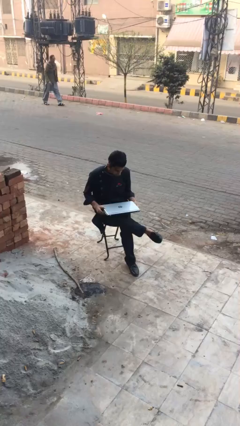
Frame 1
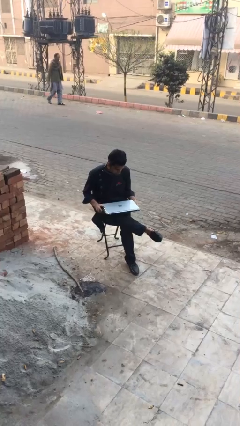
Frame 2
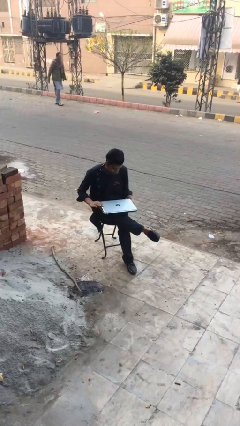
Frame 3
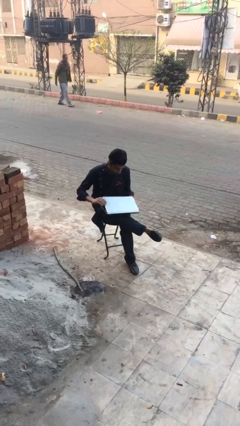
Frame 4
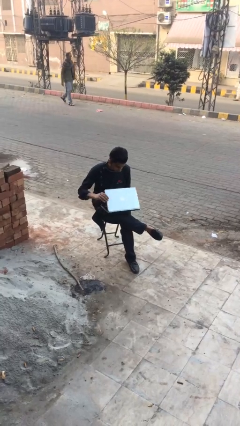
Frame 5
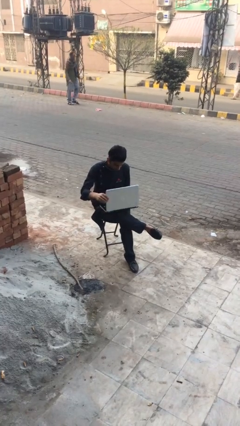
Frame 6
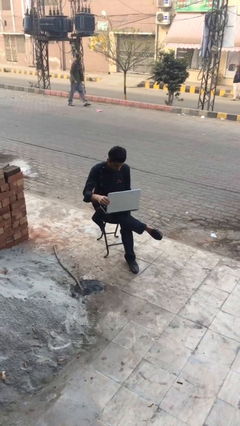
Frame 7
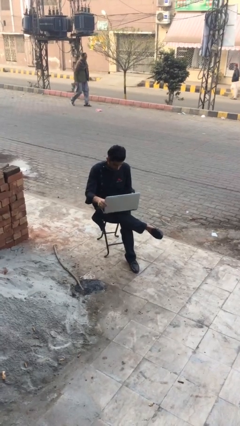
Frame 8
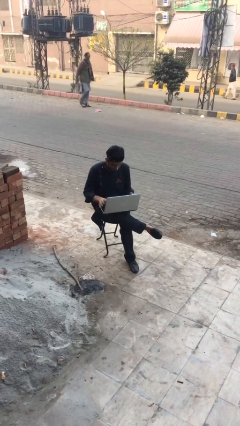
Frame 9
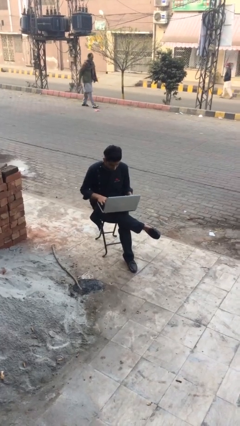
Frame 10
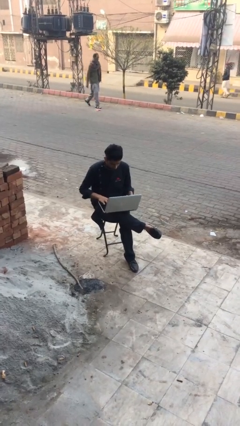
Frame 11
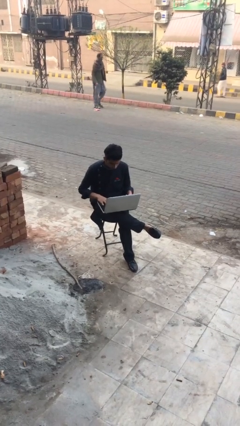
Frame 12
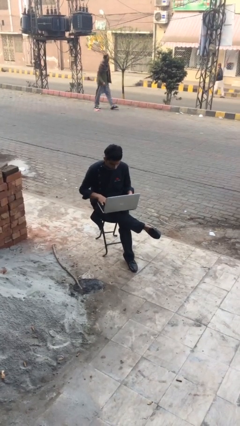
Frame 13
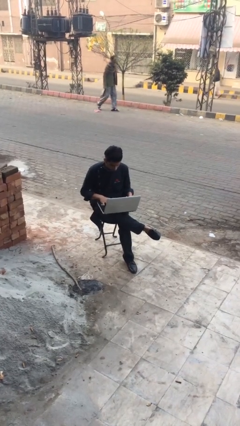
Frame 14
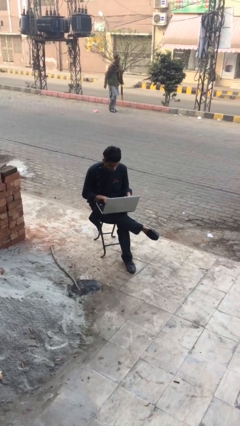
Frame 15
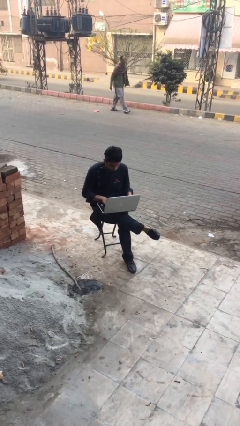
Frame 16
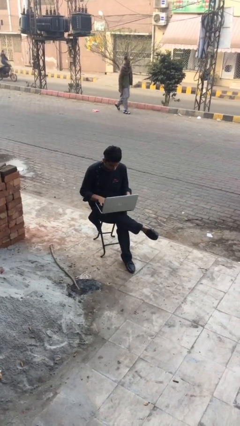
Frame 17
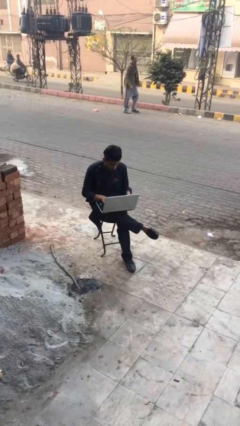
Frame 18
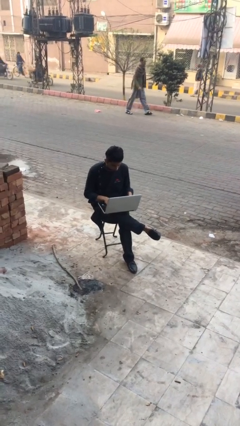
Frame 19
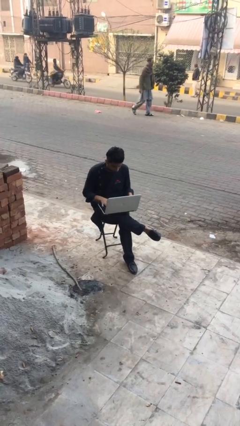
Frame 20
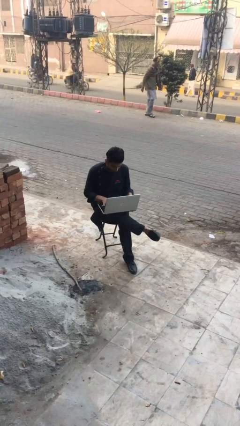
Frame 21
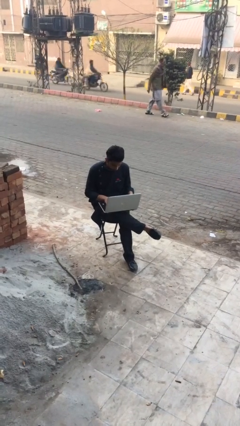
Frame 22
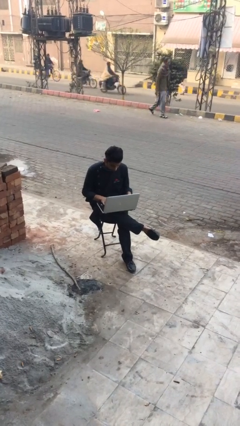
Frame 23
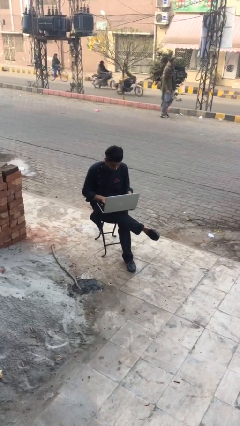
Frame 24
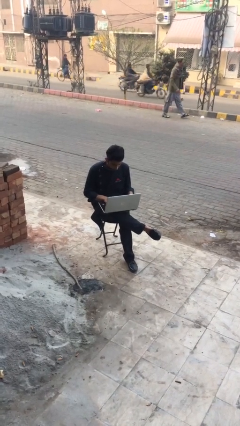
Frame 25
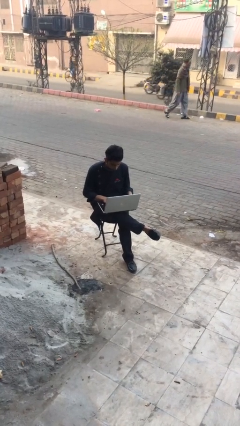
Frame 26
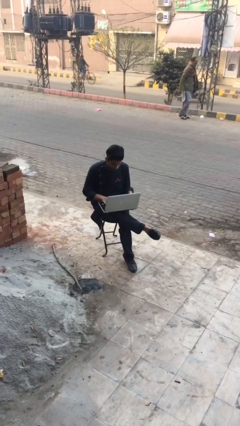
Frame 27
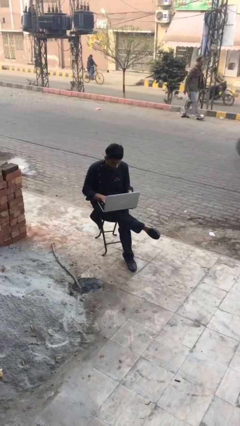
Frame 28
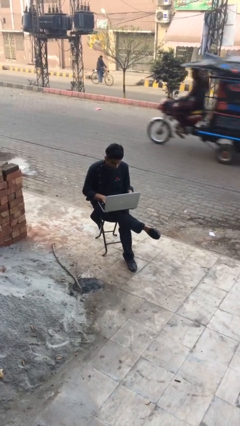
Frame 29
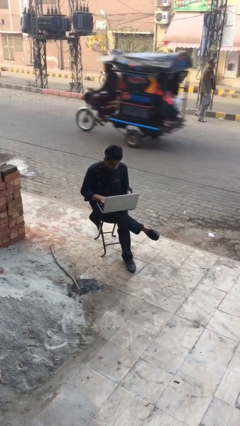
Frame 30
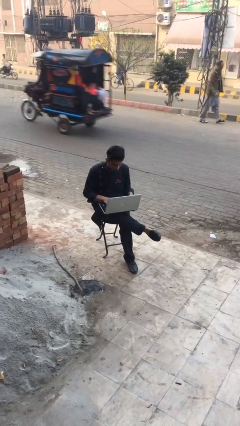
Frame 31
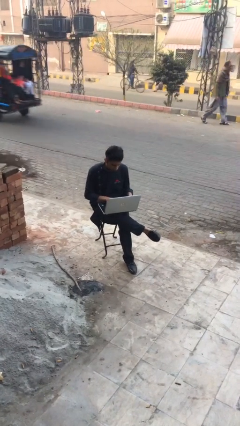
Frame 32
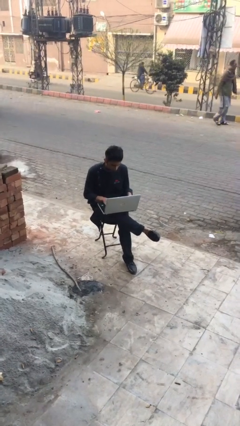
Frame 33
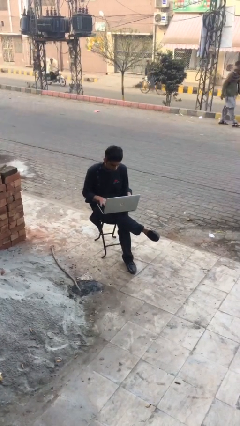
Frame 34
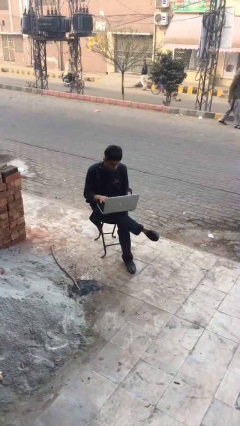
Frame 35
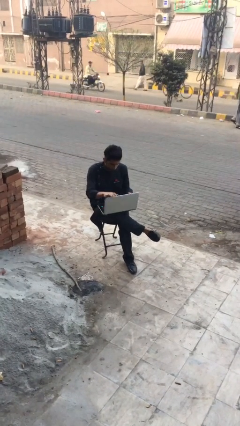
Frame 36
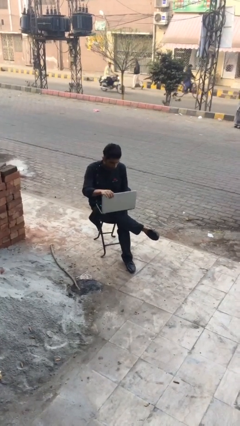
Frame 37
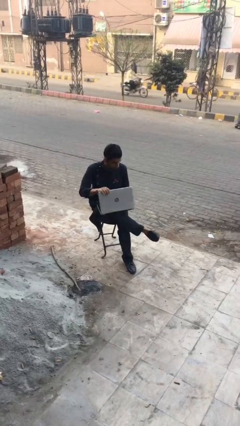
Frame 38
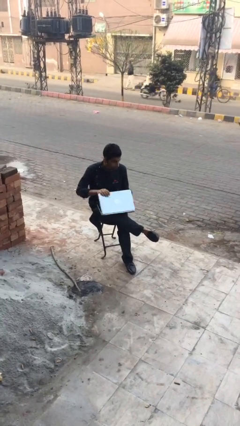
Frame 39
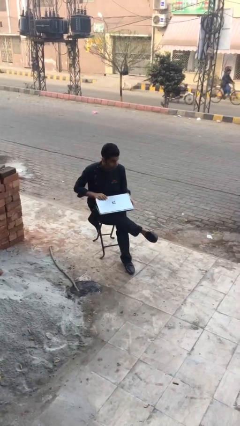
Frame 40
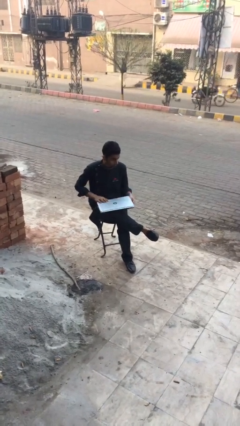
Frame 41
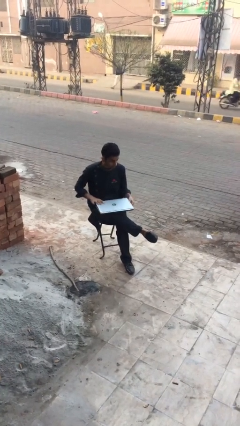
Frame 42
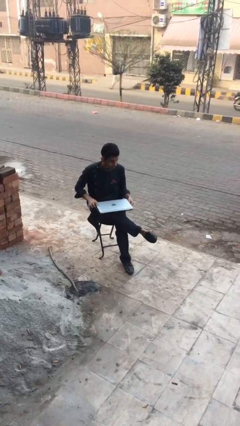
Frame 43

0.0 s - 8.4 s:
person interacts with laptop

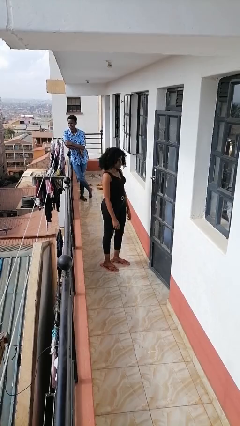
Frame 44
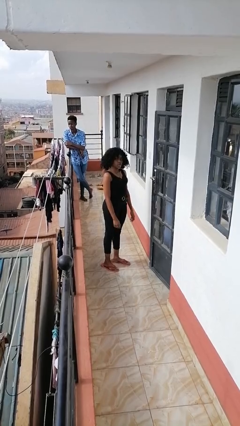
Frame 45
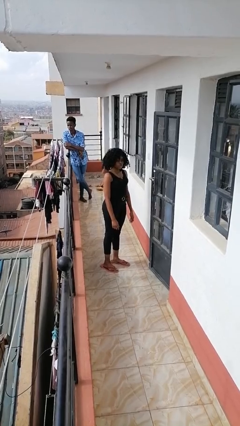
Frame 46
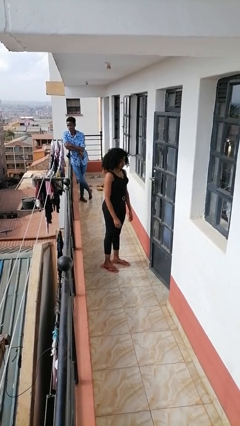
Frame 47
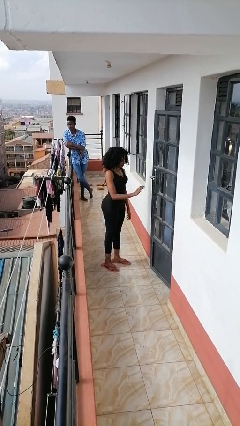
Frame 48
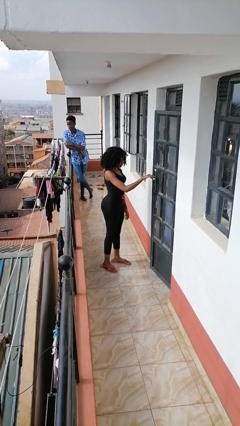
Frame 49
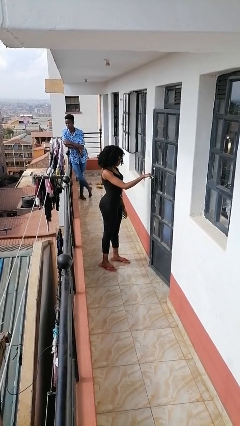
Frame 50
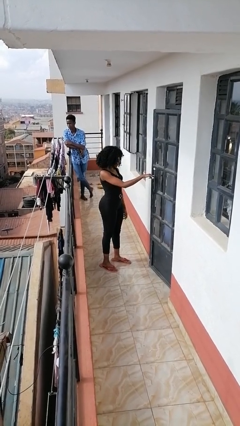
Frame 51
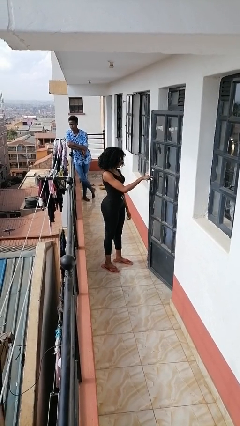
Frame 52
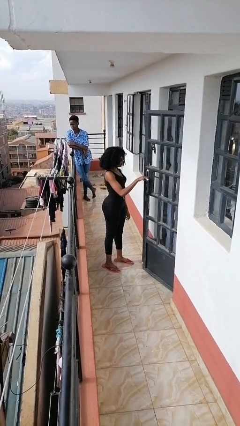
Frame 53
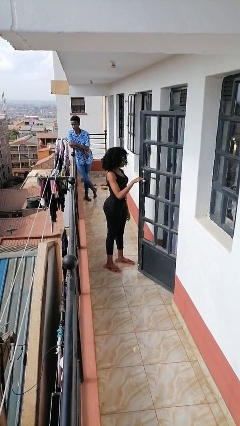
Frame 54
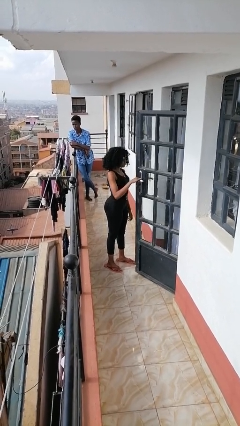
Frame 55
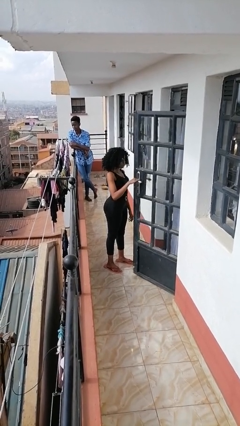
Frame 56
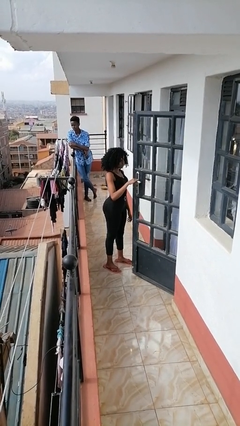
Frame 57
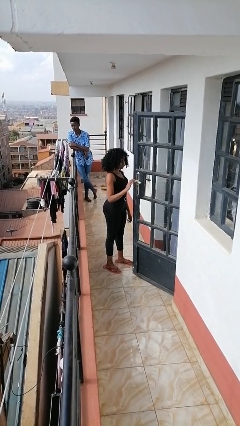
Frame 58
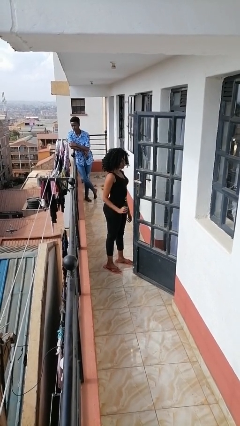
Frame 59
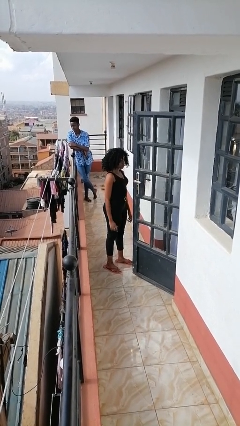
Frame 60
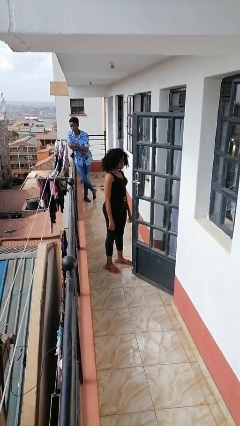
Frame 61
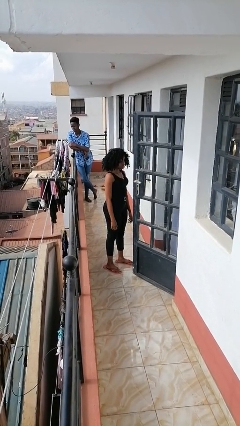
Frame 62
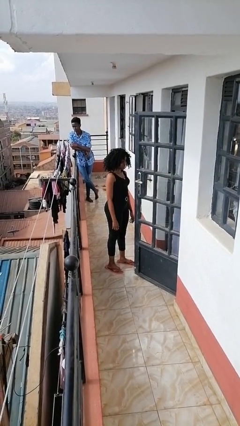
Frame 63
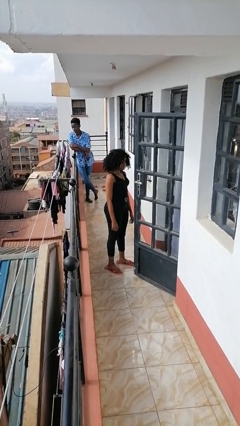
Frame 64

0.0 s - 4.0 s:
person opens facility door

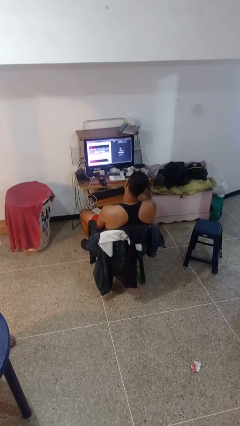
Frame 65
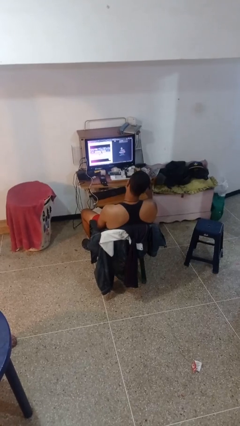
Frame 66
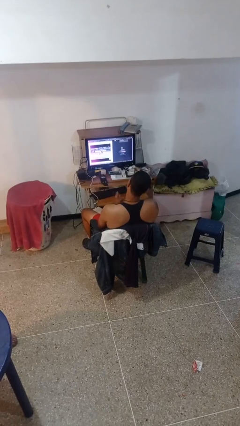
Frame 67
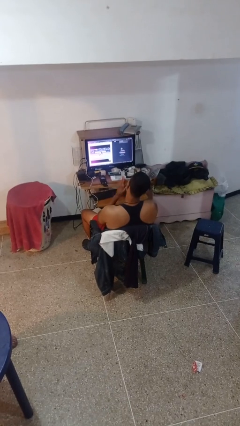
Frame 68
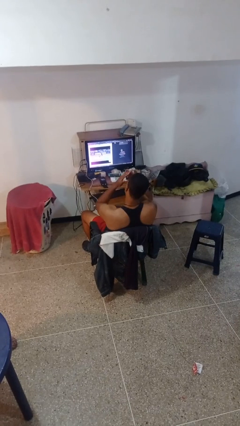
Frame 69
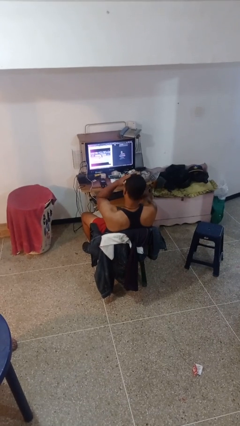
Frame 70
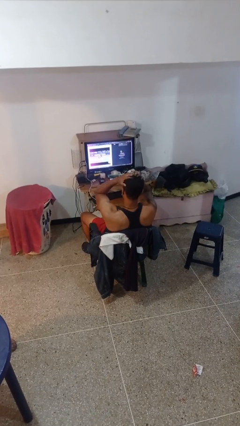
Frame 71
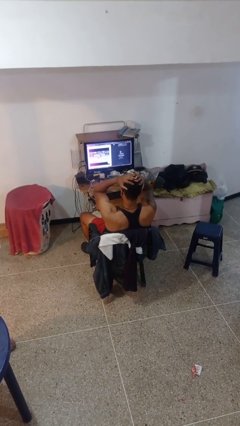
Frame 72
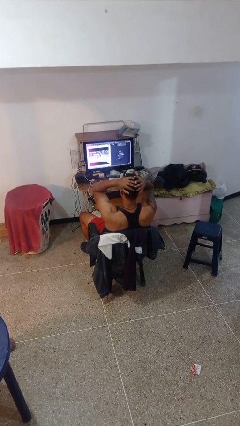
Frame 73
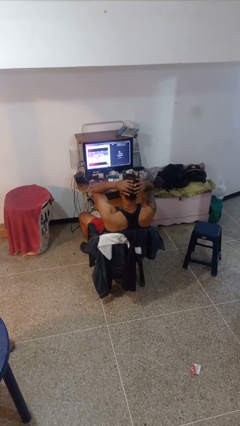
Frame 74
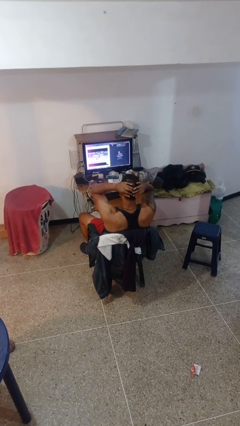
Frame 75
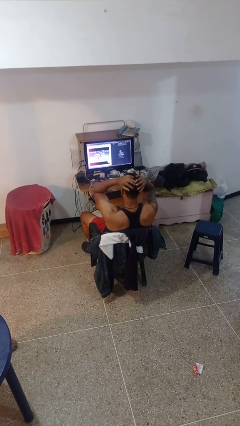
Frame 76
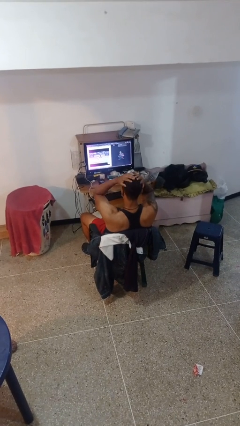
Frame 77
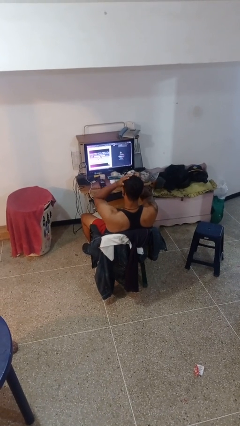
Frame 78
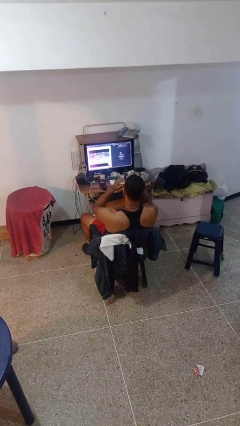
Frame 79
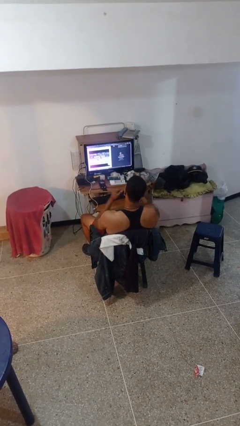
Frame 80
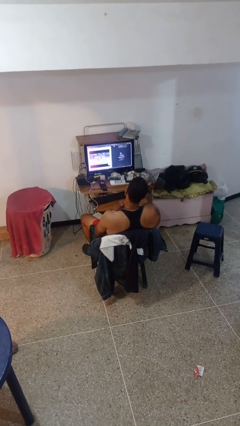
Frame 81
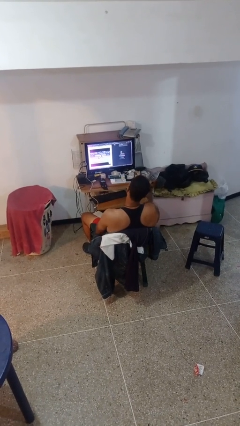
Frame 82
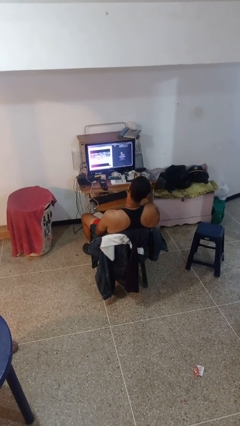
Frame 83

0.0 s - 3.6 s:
person pats head

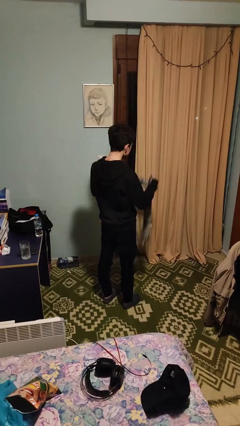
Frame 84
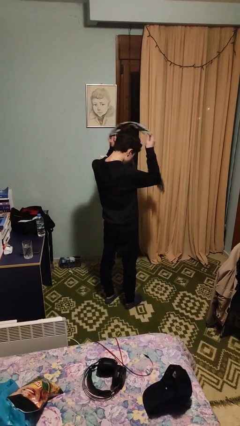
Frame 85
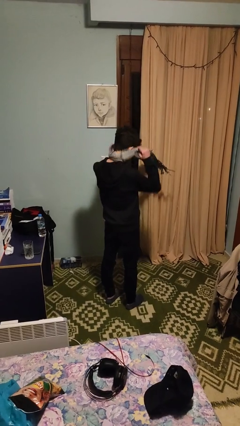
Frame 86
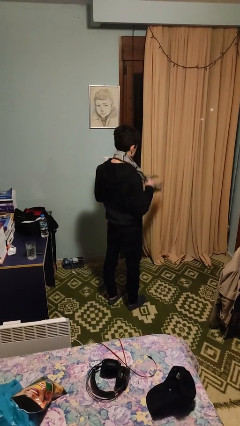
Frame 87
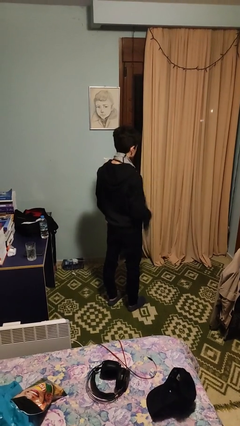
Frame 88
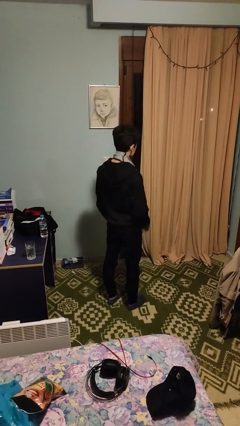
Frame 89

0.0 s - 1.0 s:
person puts on scarf

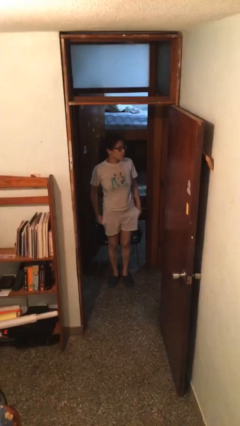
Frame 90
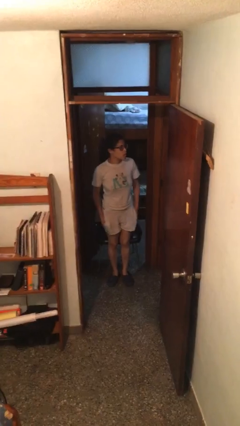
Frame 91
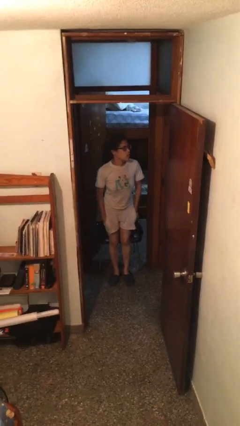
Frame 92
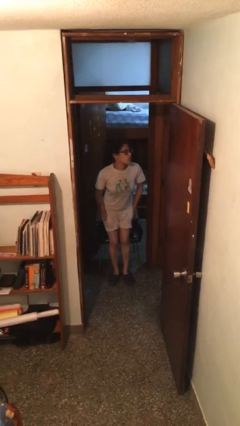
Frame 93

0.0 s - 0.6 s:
person sits down

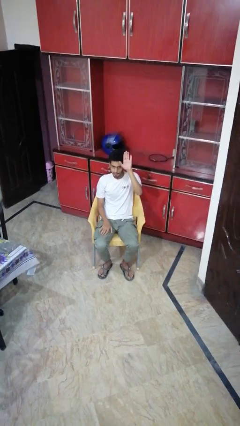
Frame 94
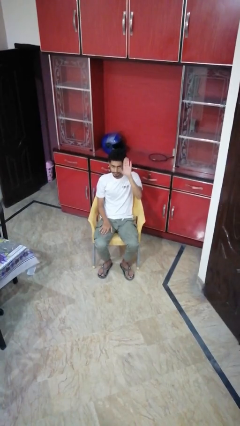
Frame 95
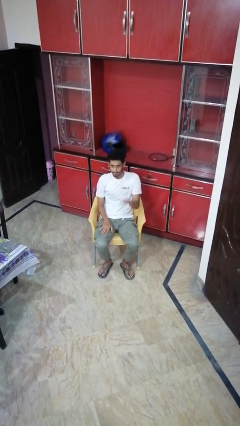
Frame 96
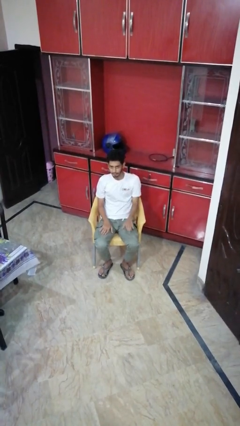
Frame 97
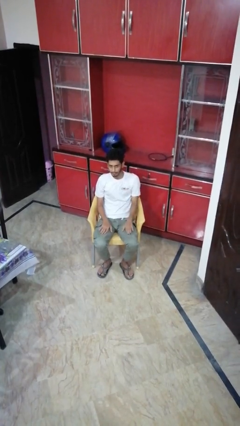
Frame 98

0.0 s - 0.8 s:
person gestures lower hand
